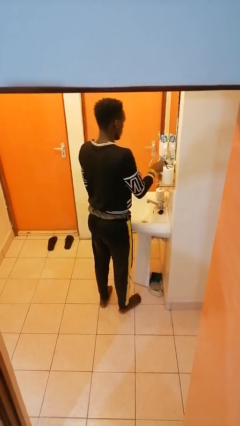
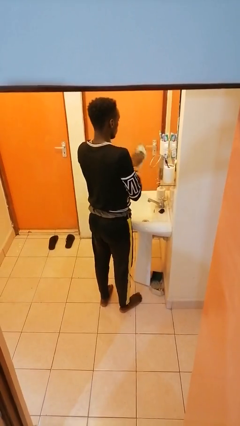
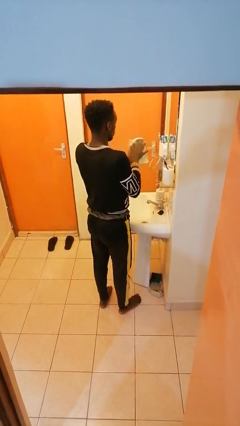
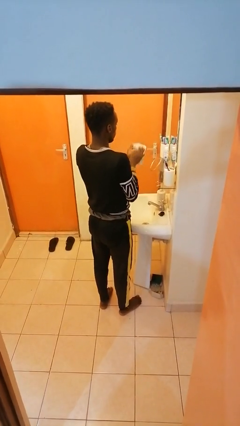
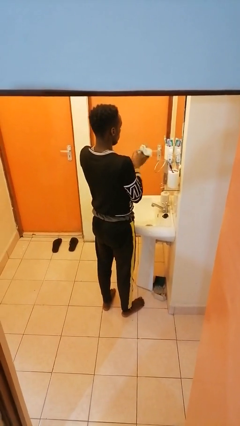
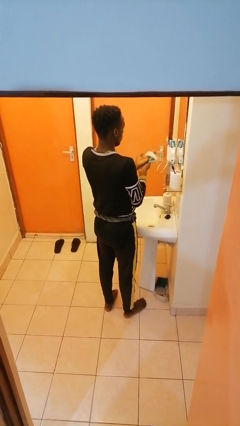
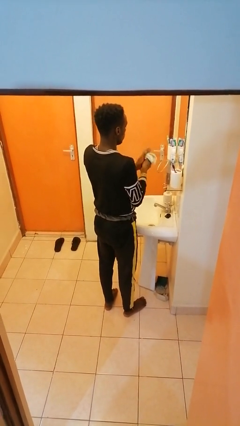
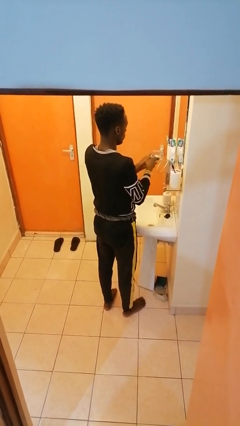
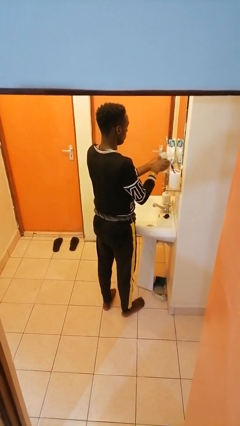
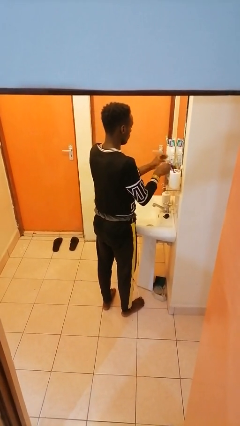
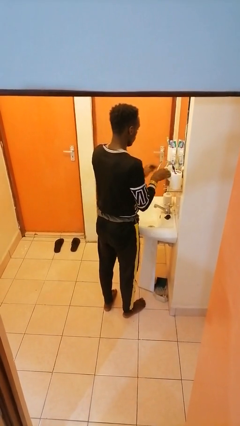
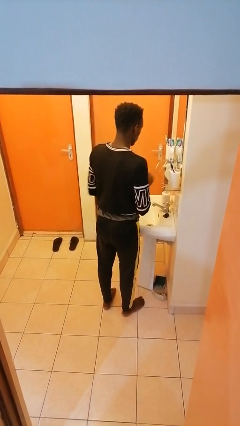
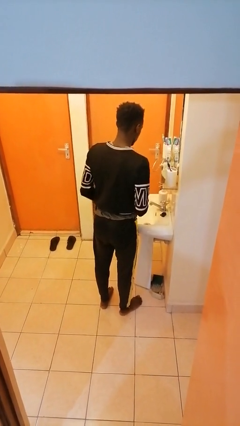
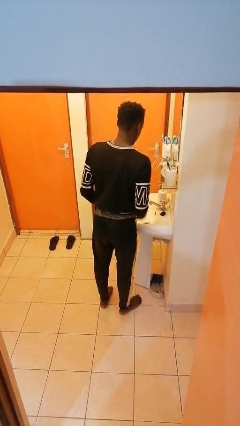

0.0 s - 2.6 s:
person dries hands with towel

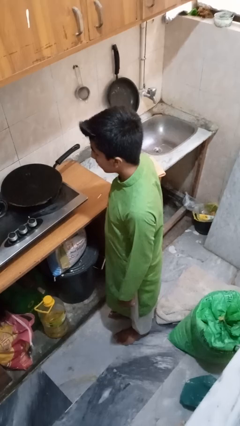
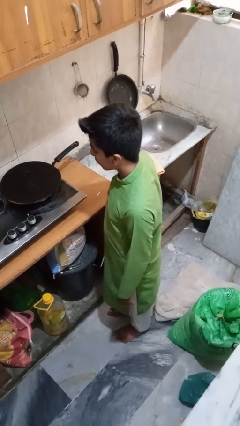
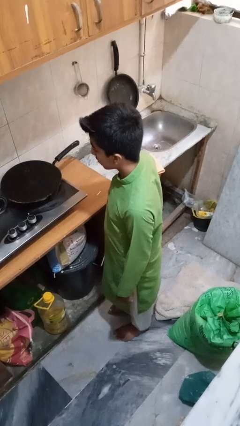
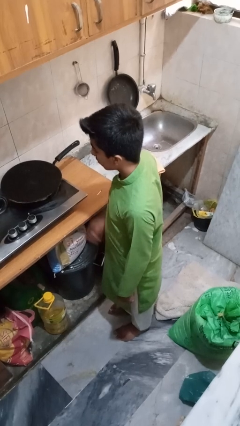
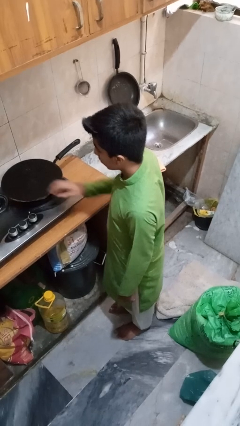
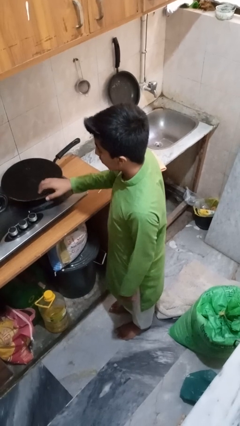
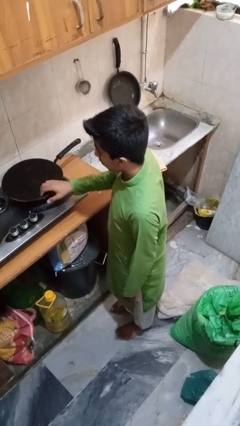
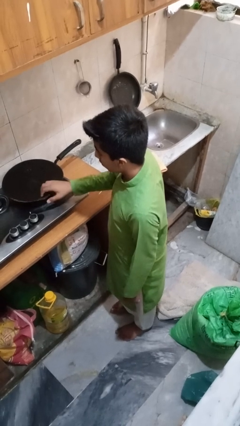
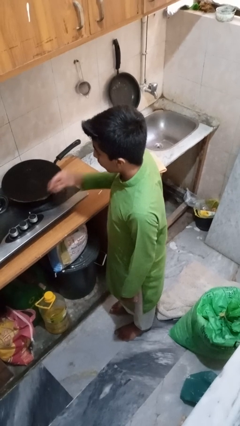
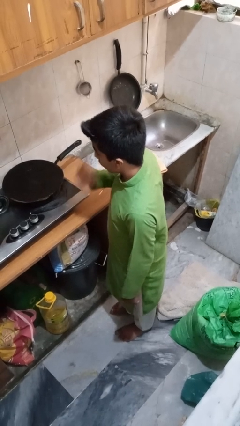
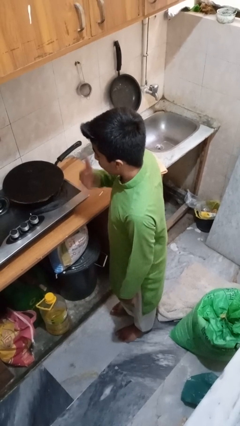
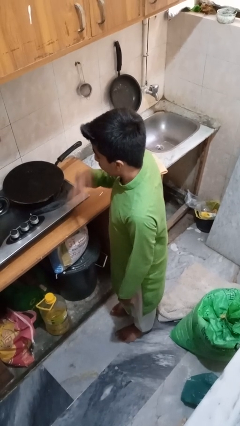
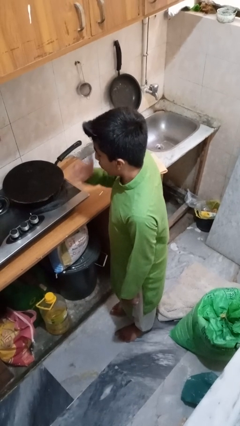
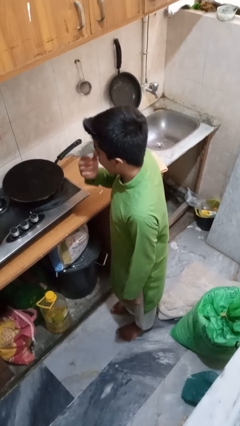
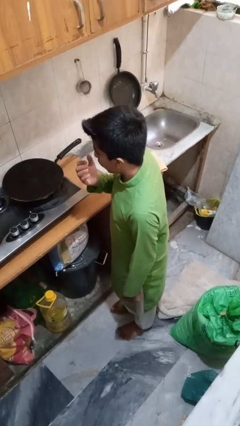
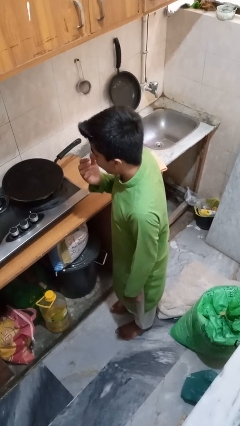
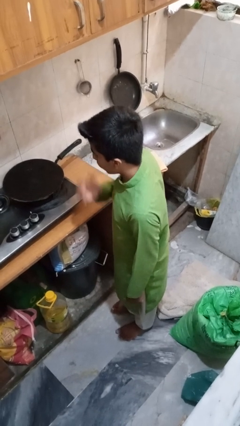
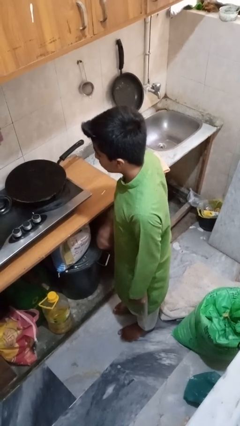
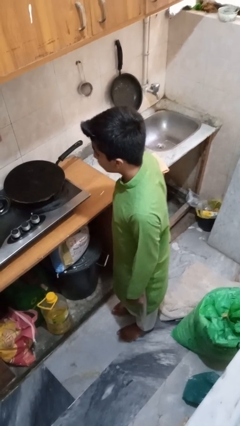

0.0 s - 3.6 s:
person burns hand

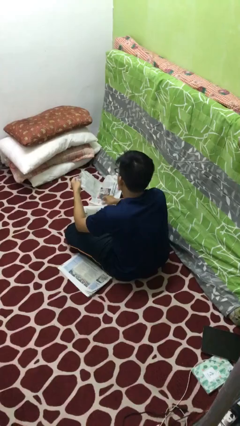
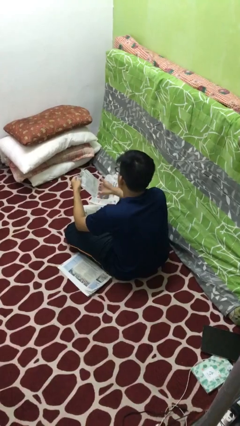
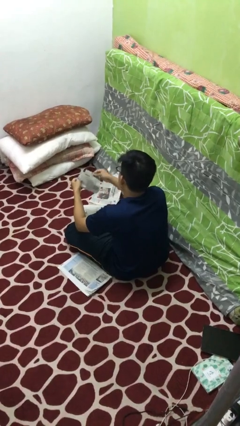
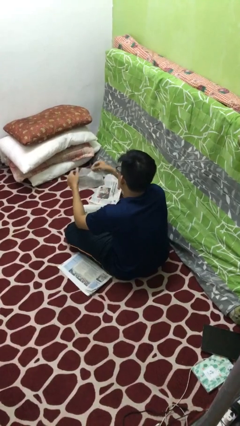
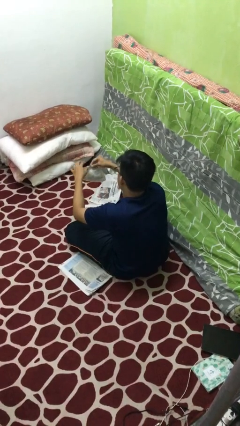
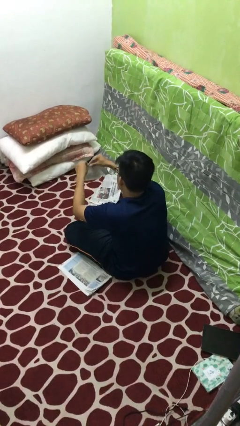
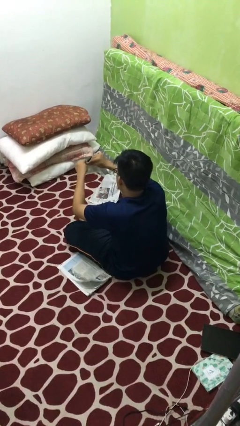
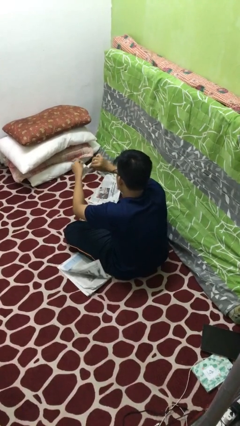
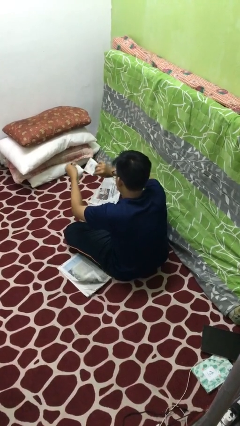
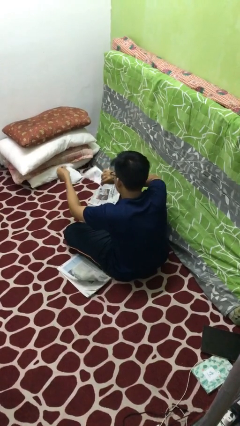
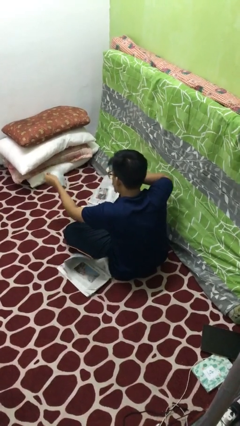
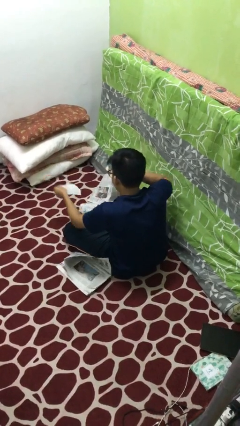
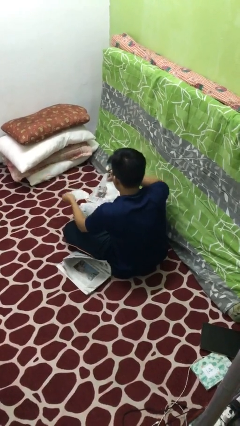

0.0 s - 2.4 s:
person tears paper

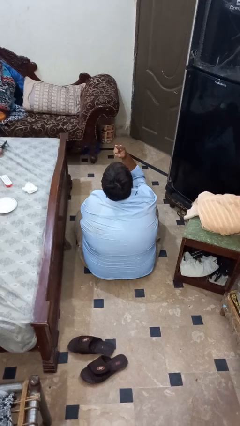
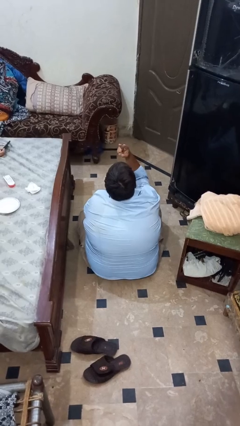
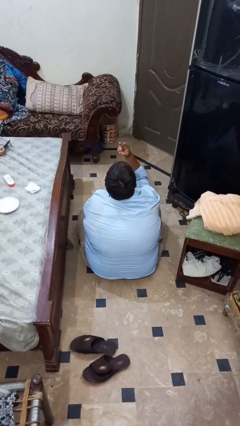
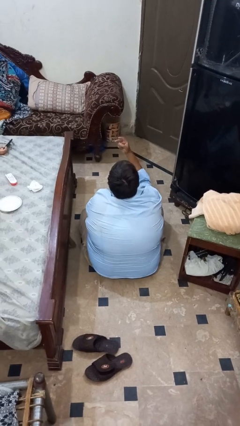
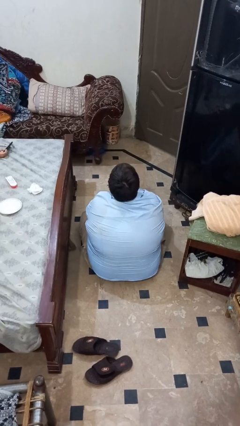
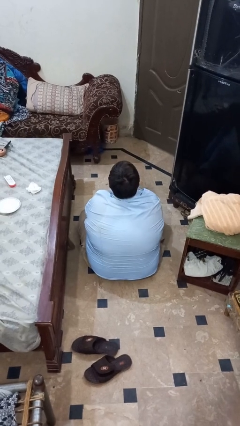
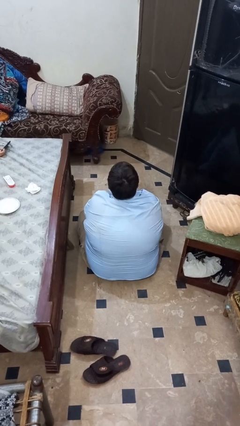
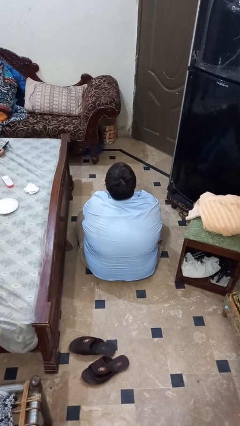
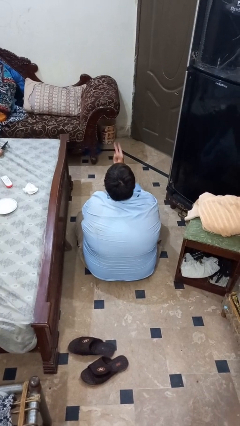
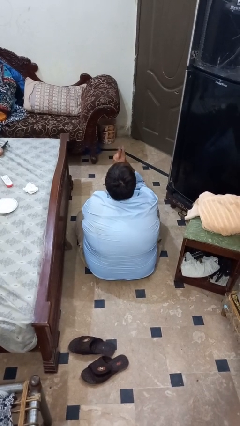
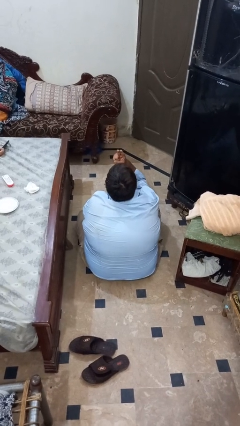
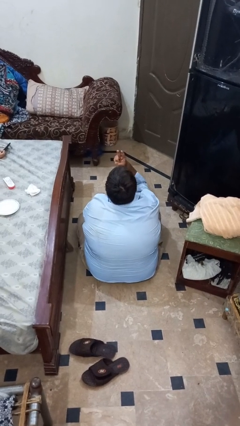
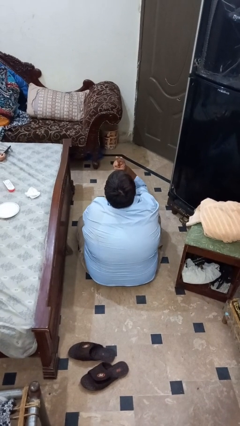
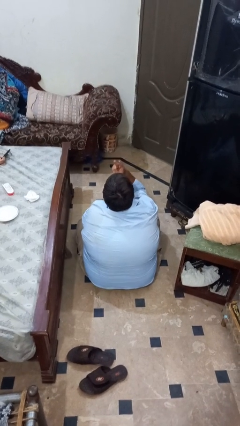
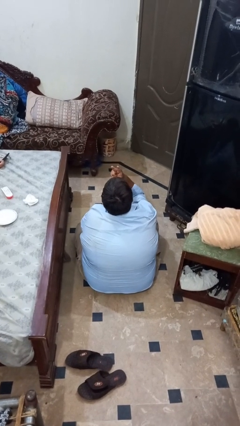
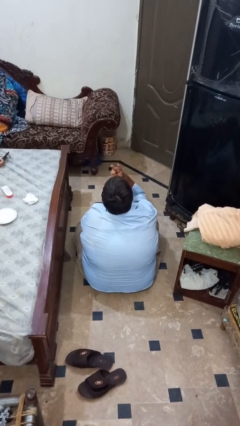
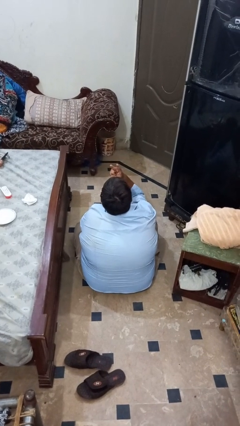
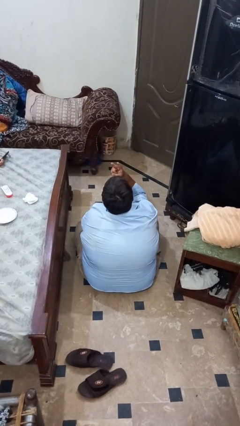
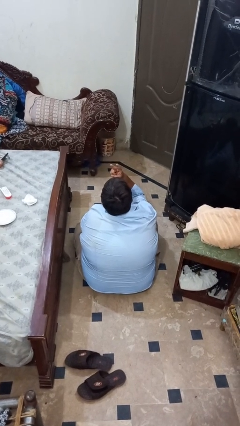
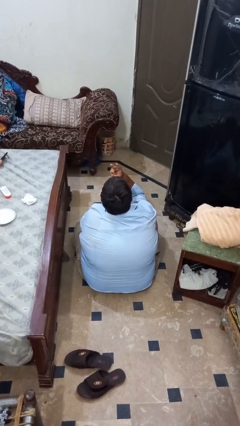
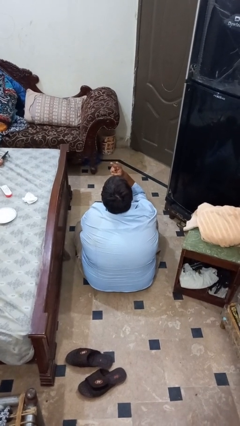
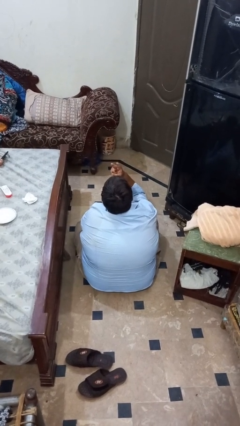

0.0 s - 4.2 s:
person gestures watch closely

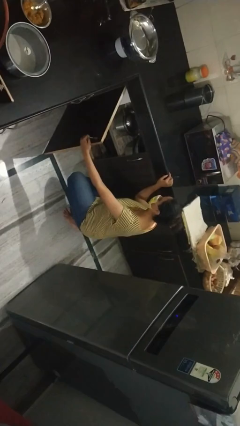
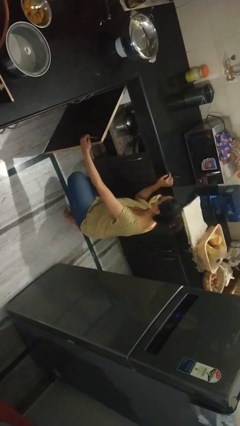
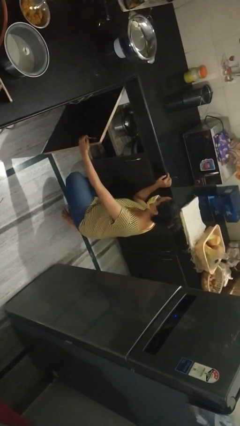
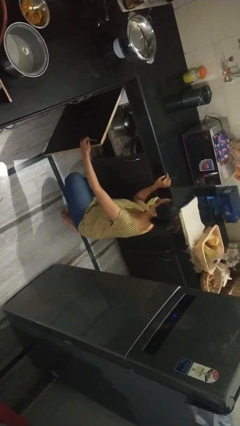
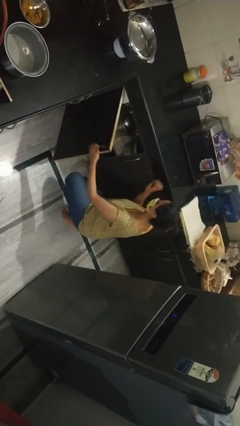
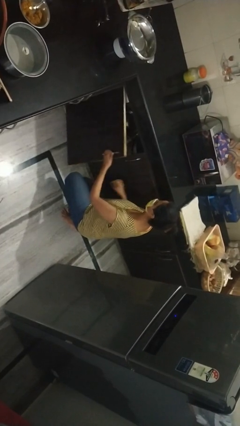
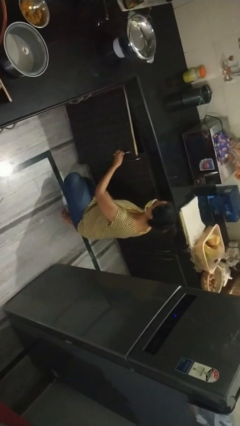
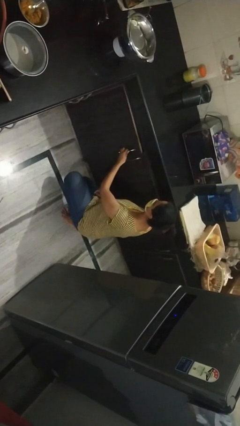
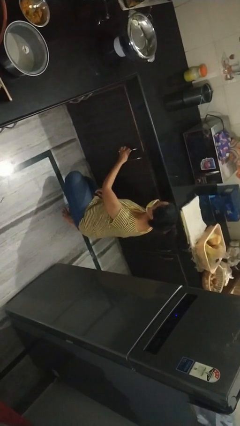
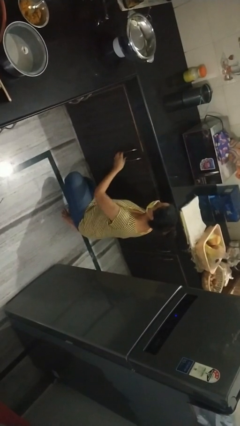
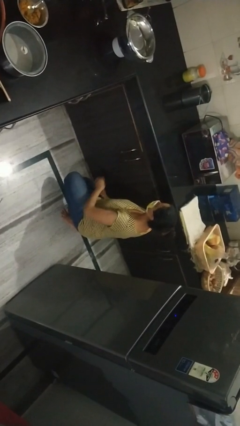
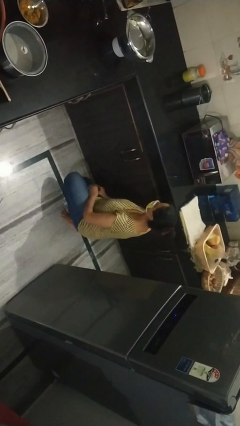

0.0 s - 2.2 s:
person closes cabinet

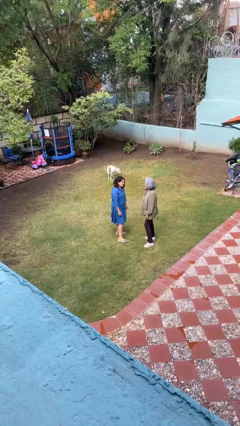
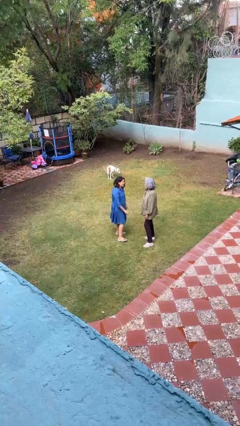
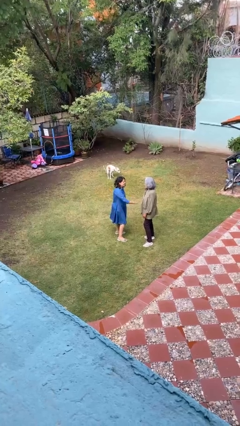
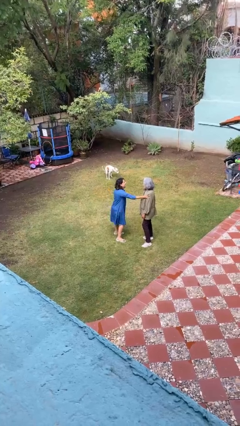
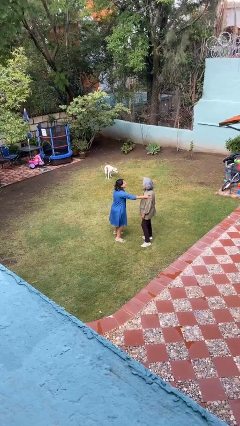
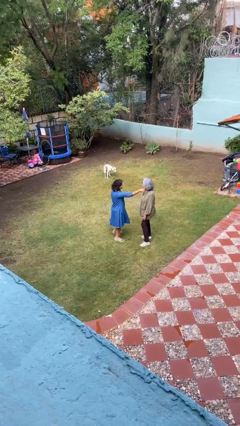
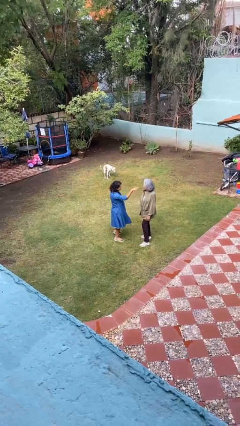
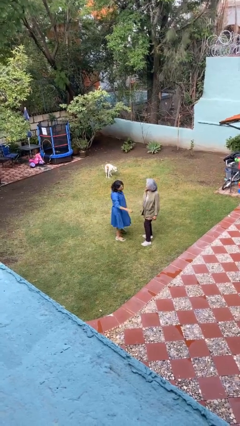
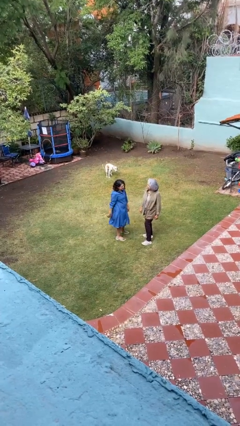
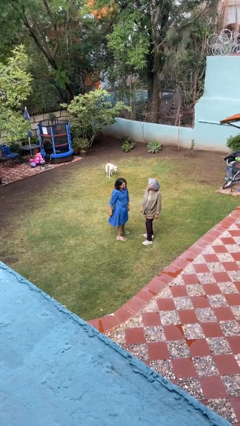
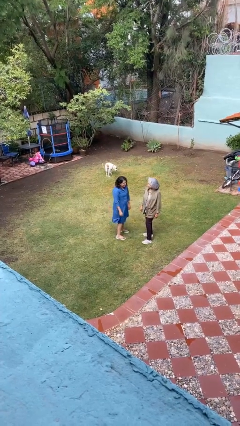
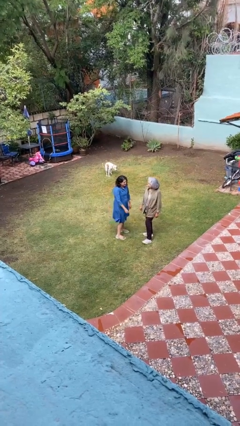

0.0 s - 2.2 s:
person shoves person

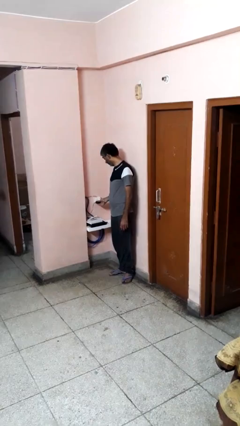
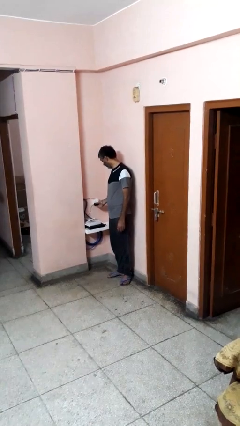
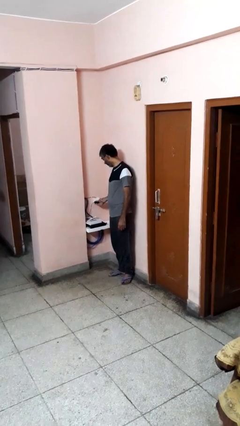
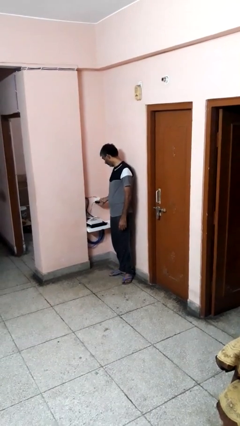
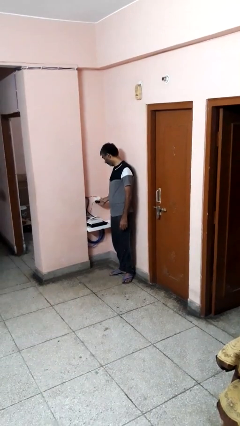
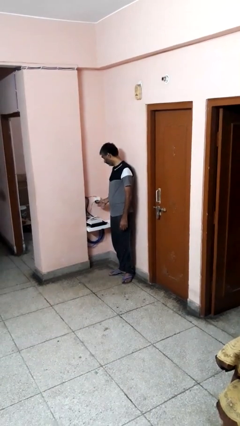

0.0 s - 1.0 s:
person plugs into electrical socket
